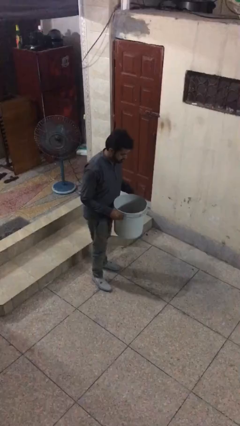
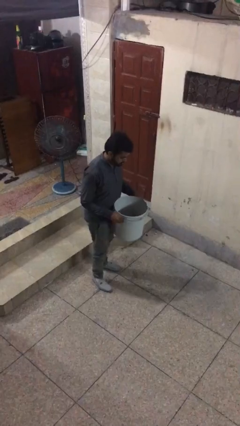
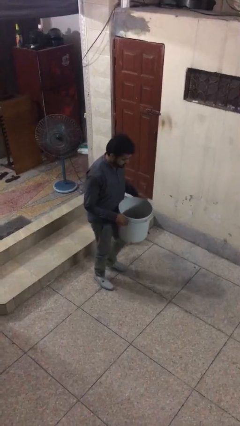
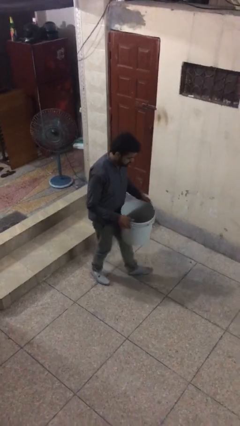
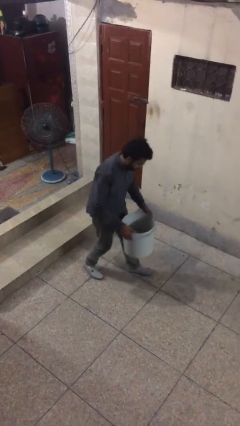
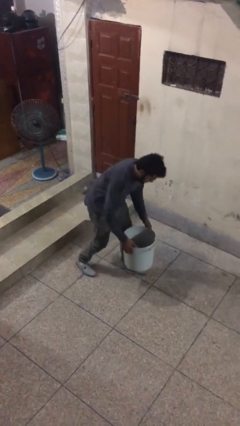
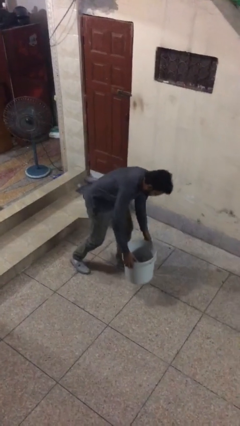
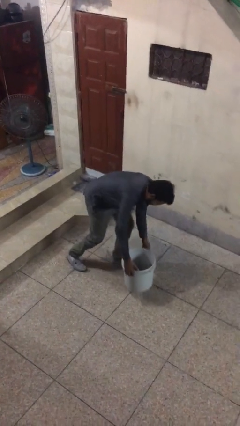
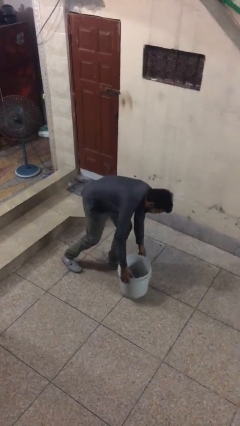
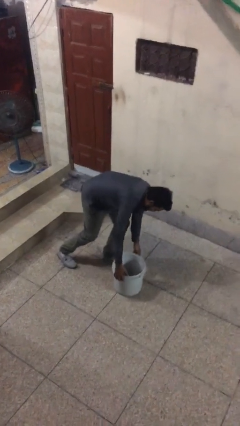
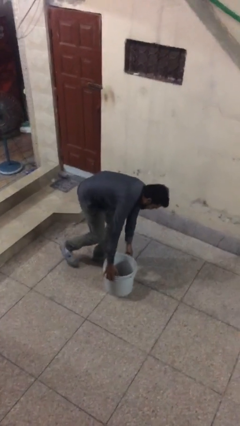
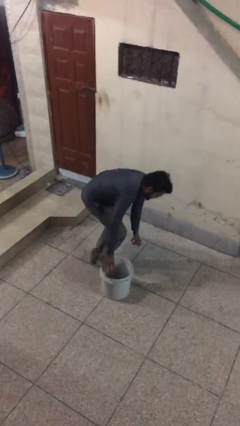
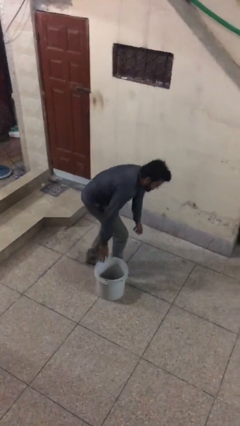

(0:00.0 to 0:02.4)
person puts down object on floor

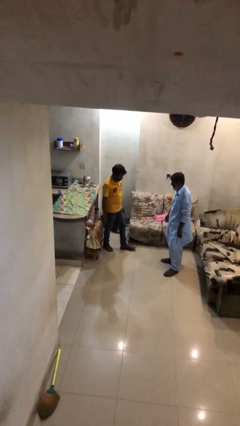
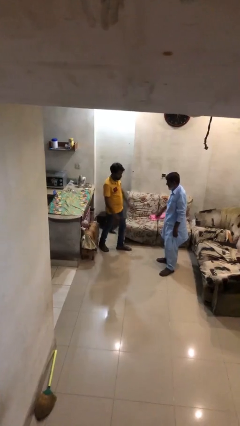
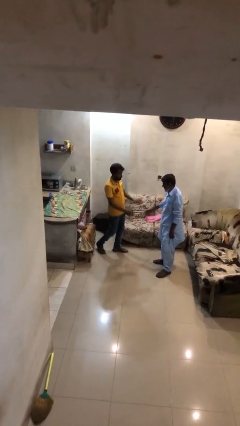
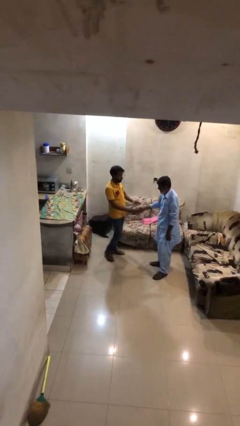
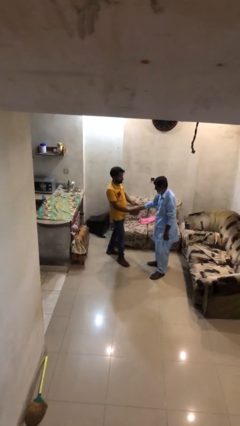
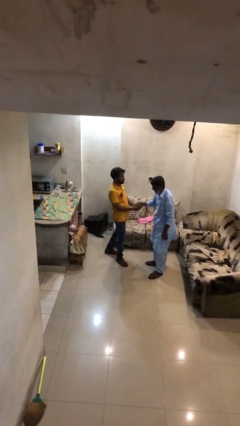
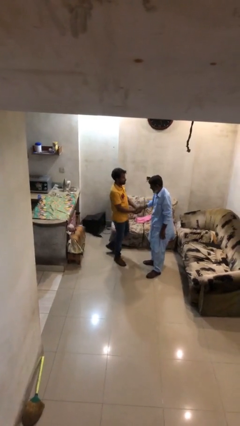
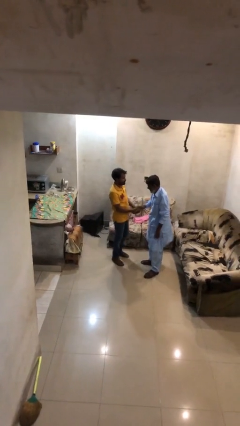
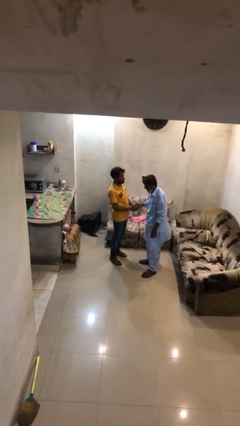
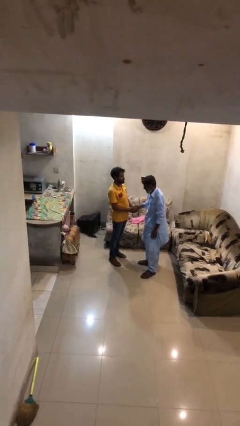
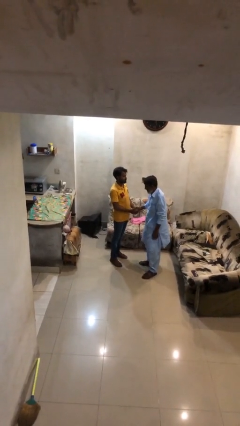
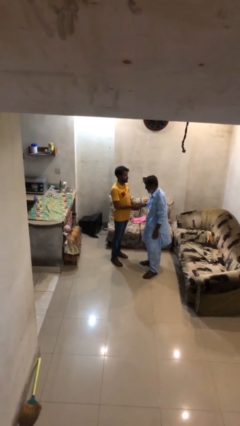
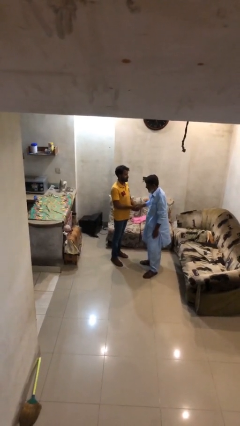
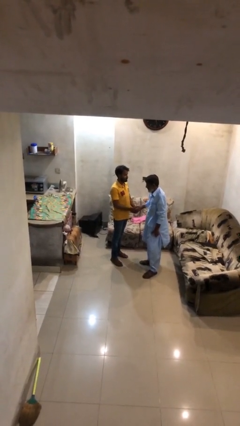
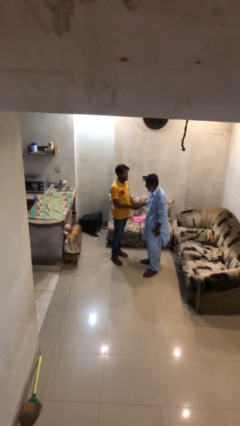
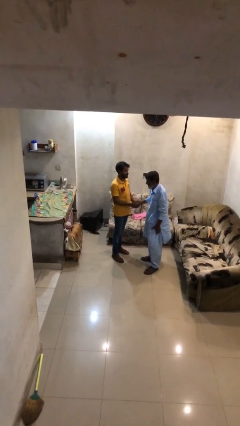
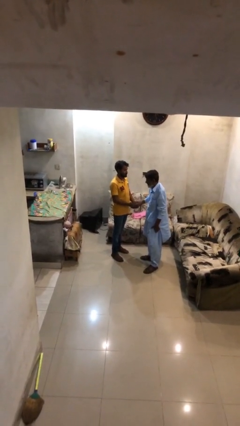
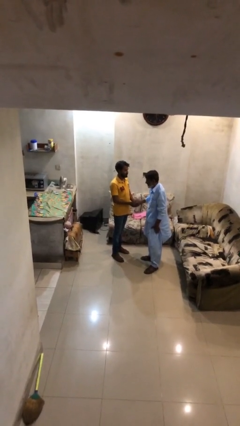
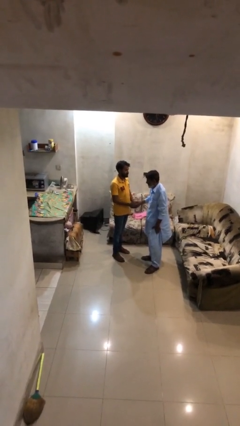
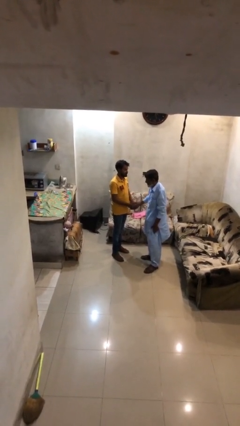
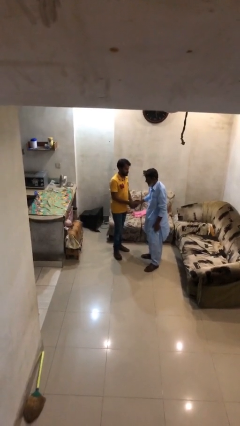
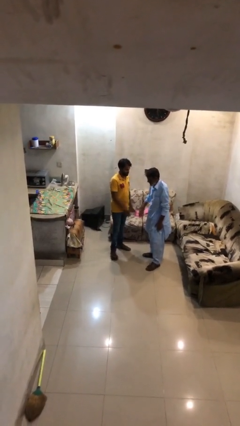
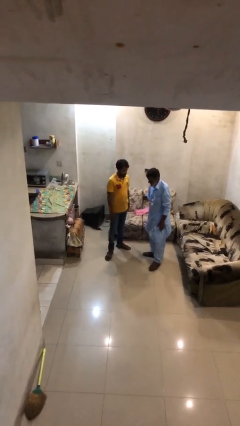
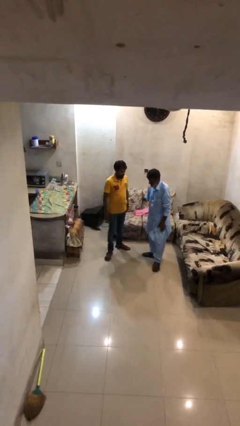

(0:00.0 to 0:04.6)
person shakes hand

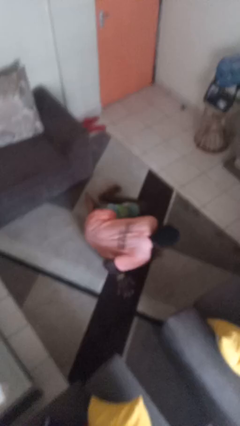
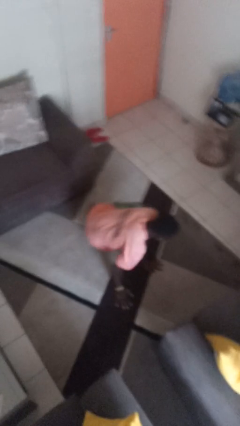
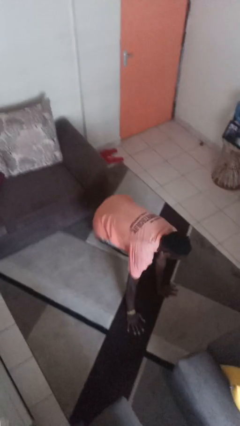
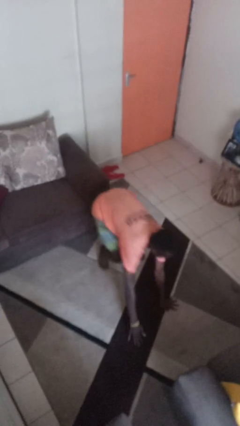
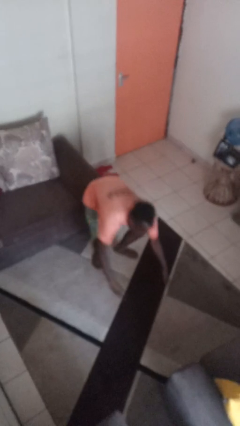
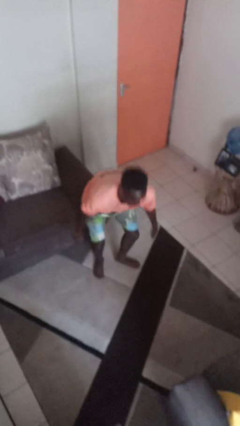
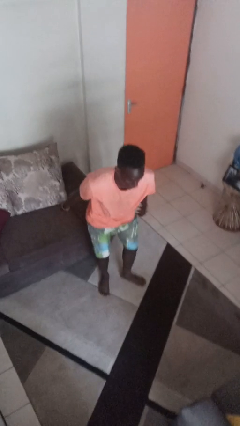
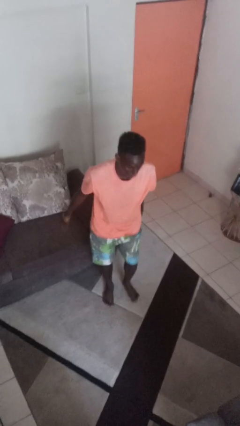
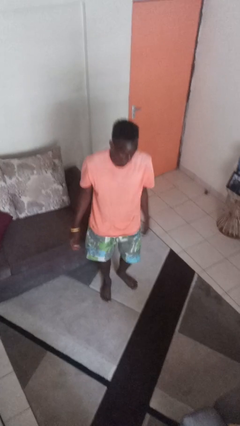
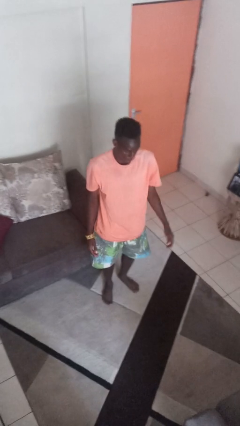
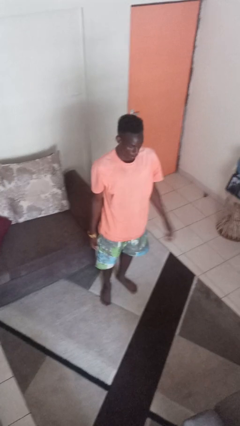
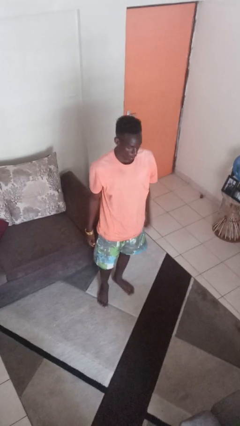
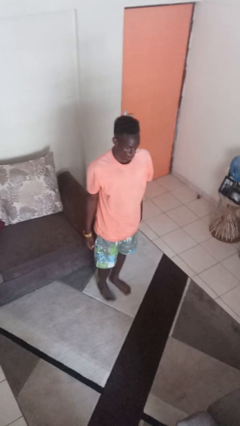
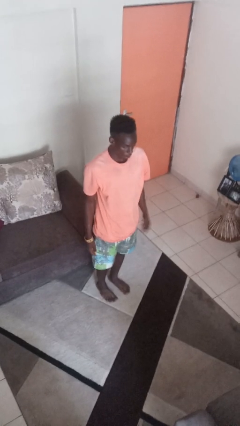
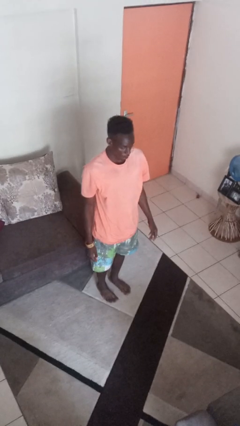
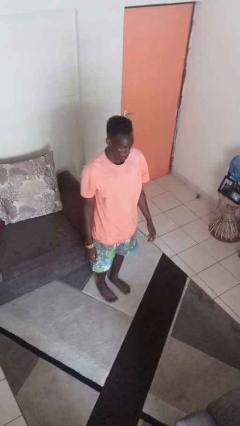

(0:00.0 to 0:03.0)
person stands up from floor

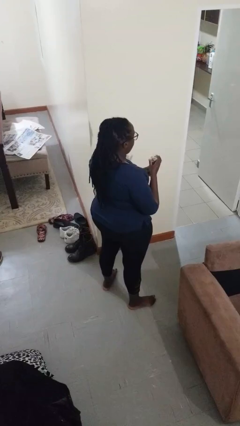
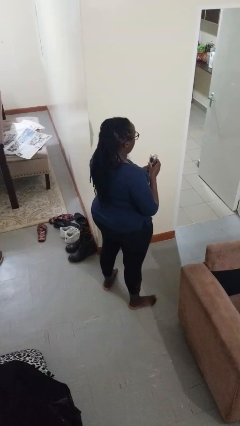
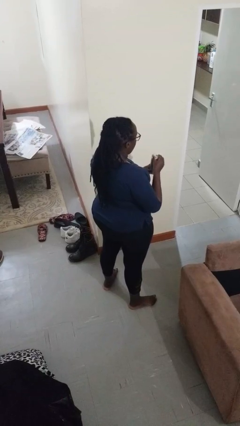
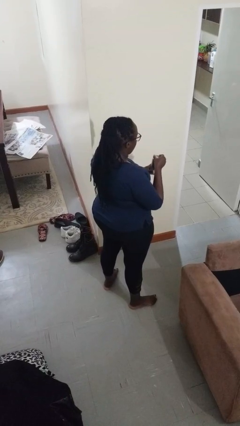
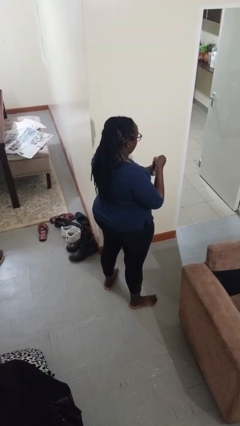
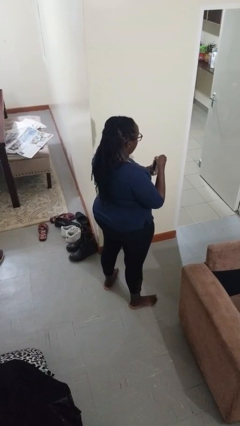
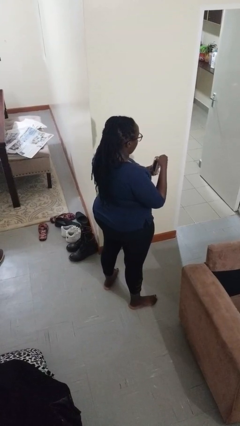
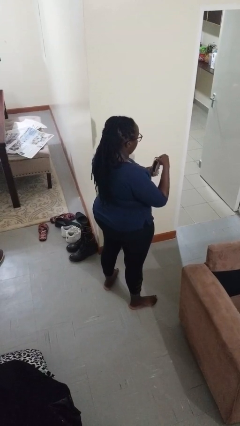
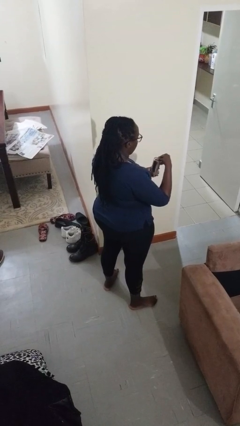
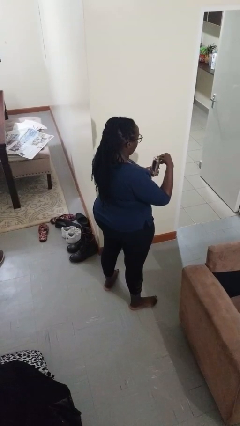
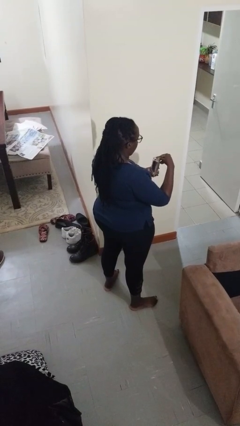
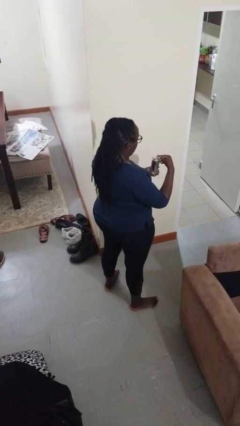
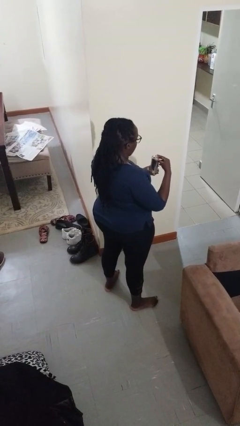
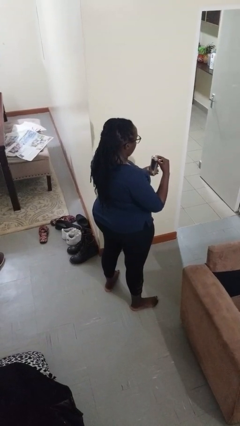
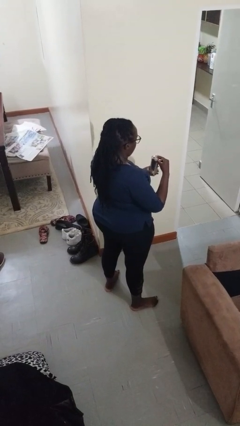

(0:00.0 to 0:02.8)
person opens beverage can

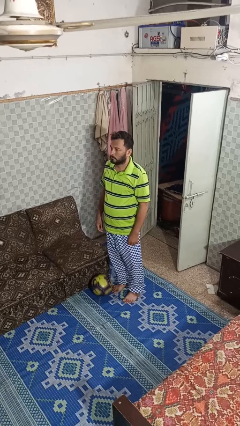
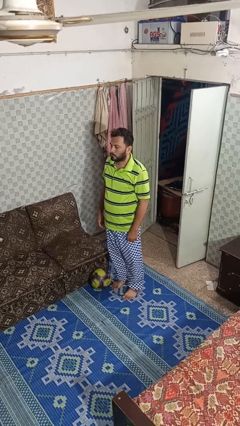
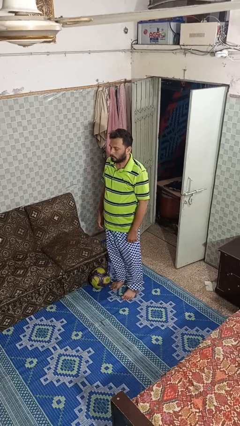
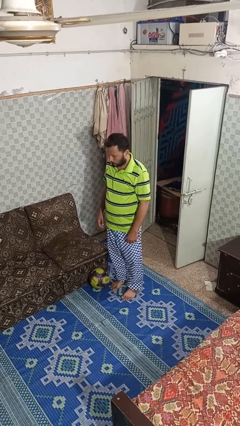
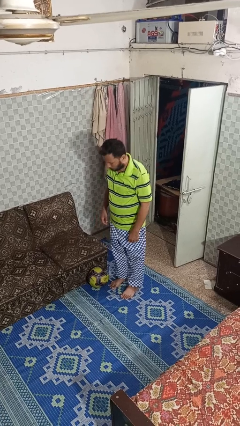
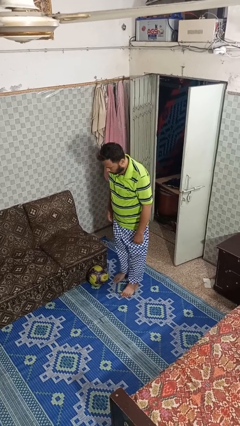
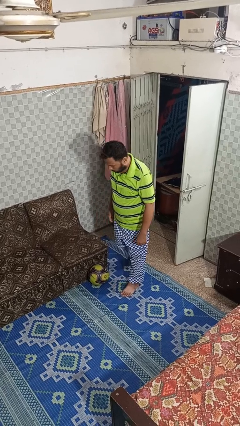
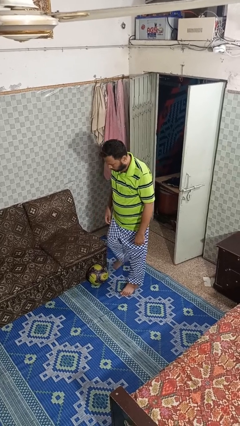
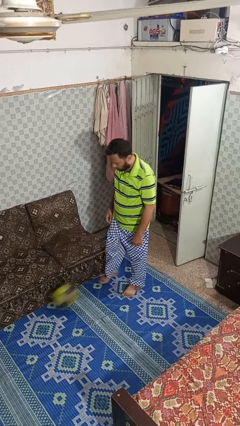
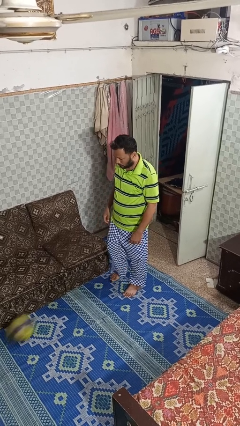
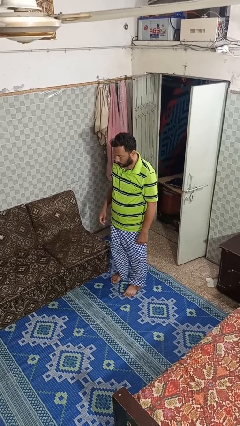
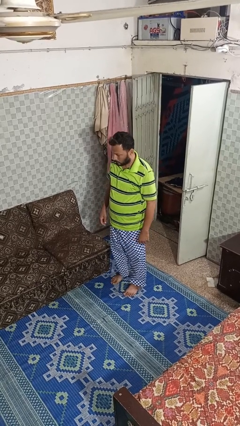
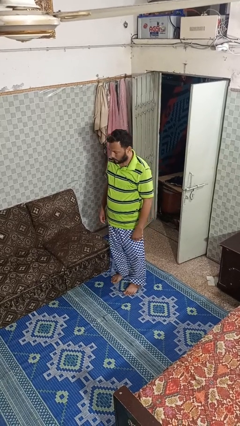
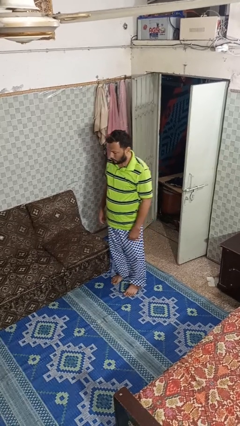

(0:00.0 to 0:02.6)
person kicks object to person

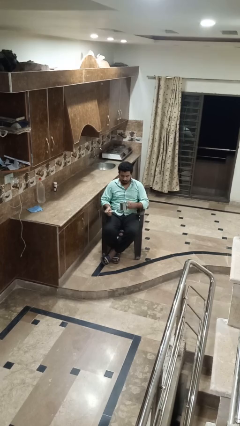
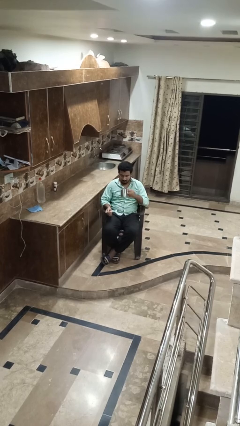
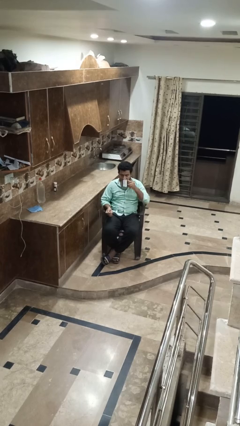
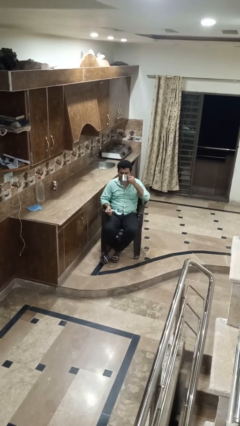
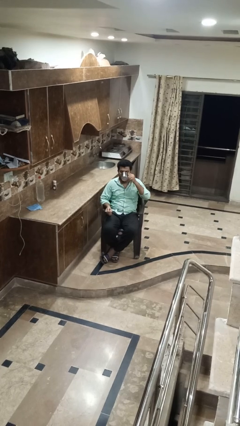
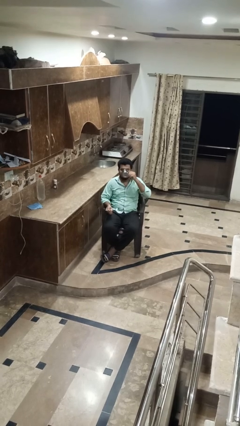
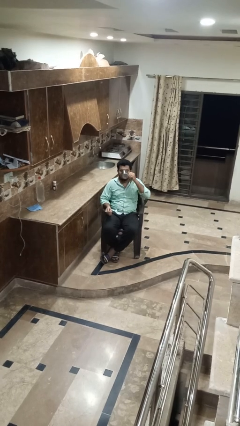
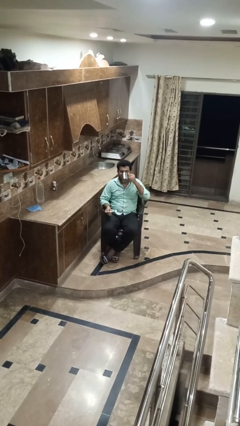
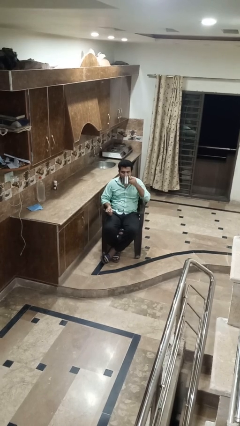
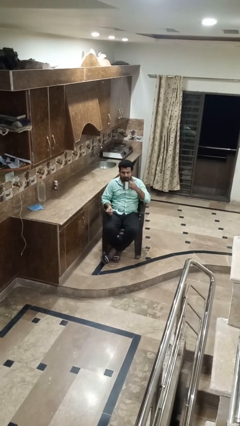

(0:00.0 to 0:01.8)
person drinks from mug
